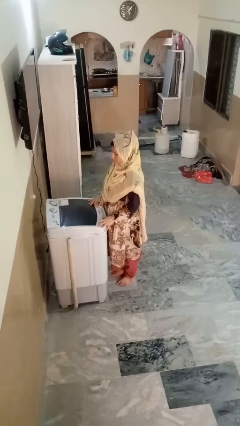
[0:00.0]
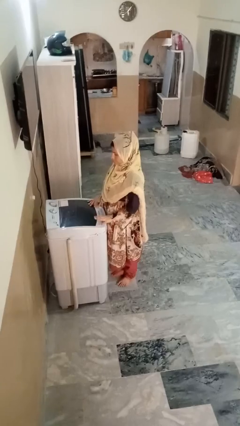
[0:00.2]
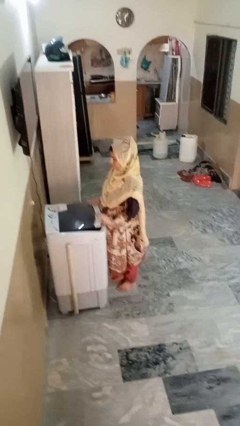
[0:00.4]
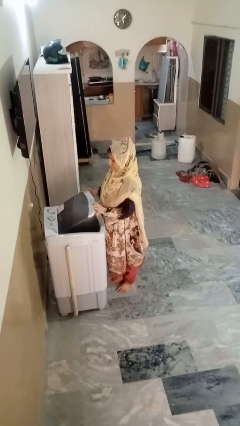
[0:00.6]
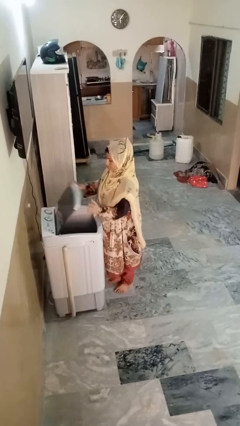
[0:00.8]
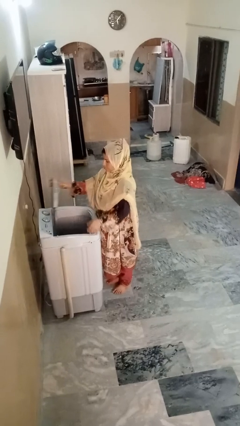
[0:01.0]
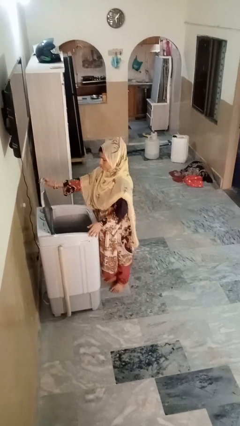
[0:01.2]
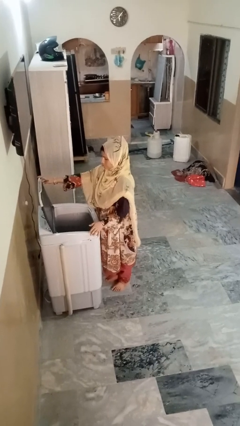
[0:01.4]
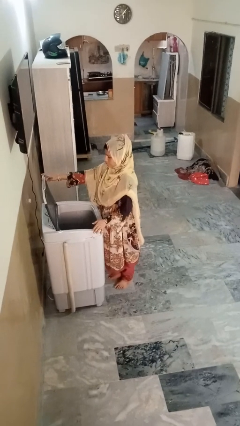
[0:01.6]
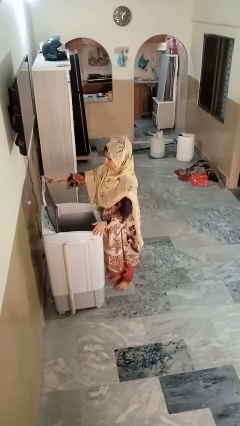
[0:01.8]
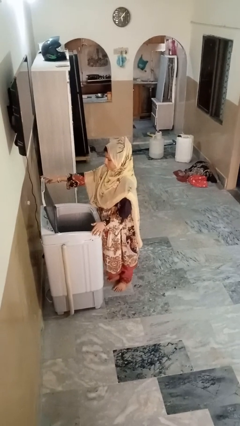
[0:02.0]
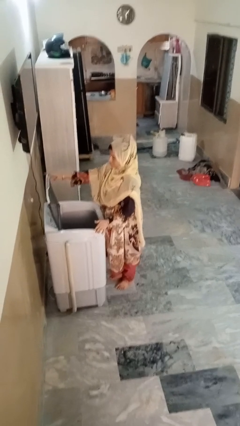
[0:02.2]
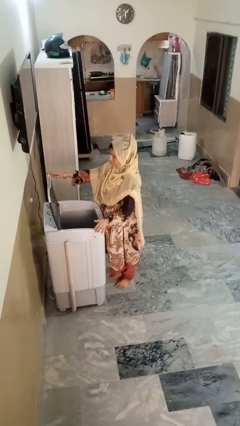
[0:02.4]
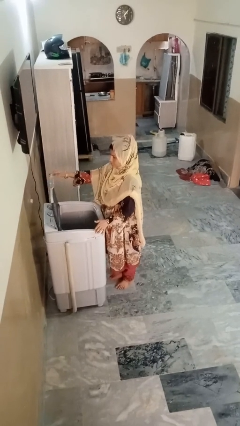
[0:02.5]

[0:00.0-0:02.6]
person opens clothes washer

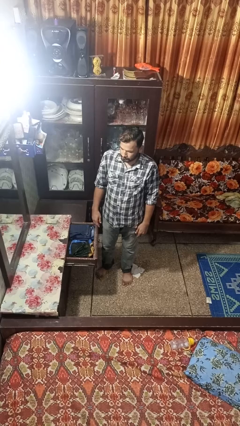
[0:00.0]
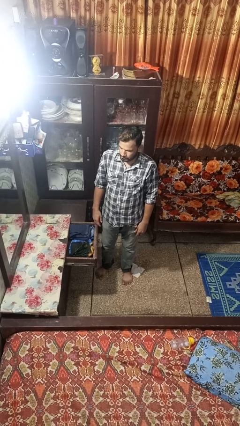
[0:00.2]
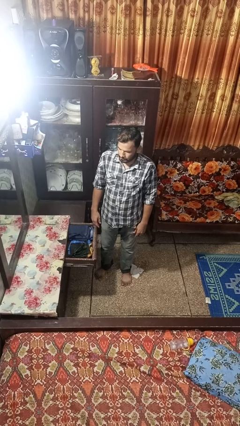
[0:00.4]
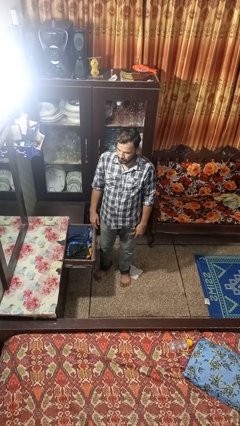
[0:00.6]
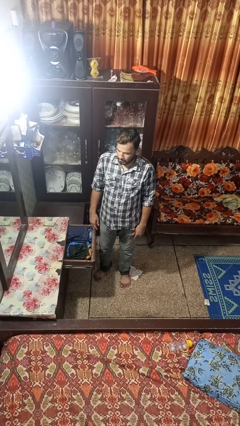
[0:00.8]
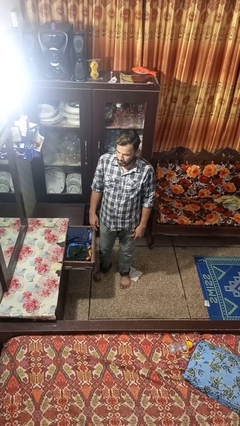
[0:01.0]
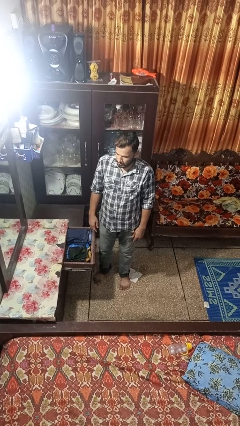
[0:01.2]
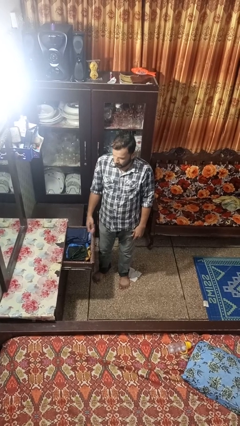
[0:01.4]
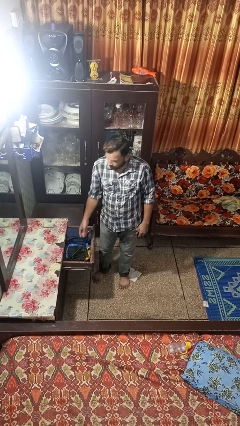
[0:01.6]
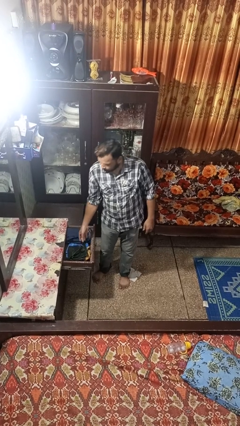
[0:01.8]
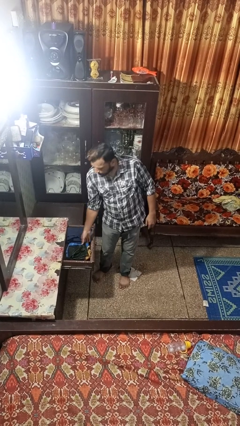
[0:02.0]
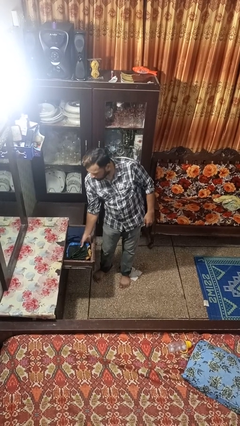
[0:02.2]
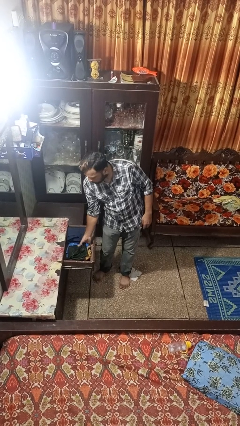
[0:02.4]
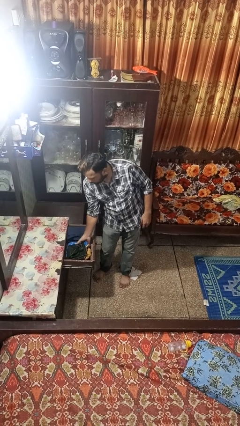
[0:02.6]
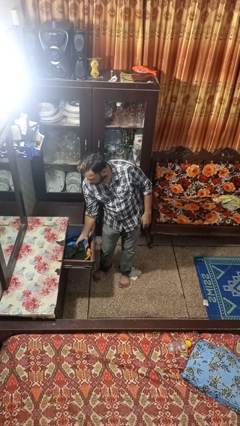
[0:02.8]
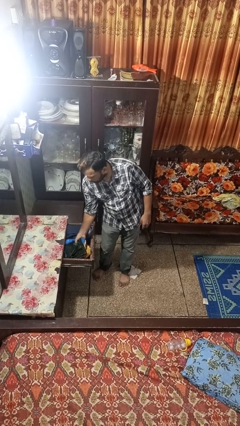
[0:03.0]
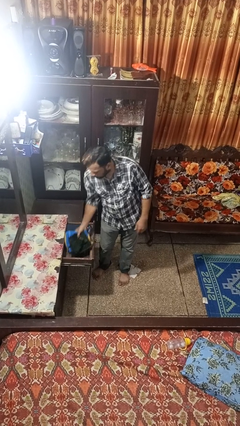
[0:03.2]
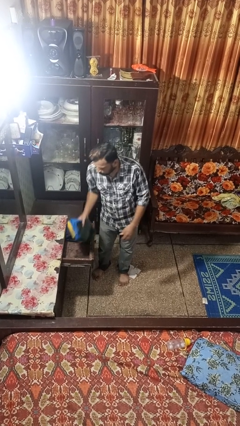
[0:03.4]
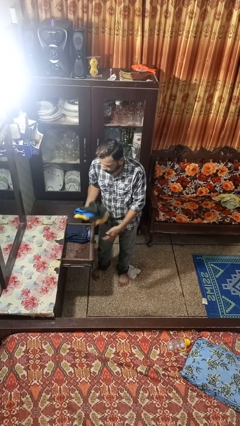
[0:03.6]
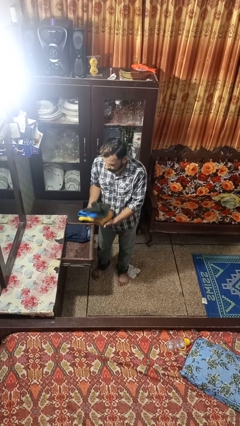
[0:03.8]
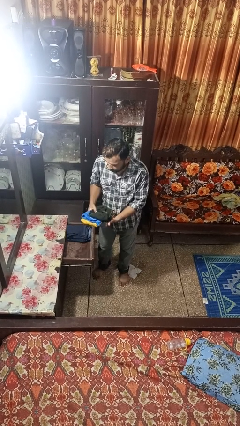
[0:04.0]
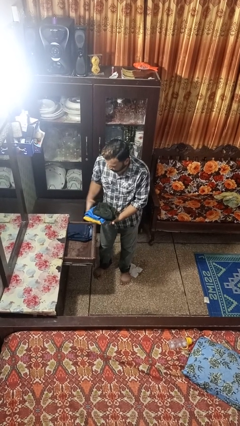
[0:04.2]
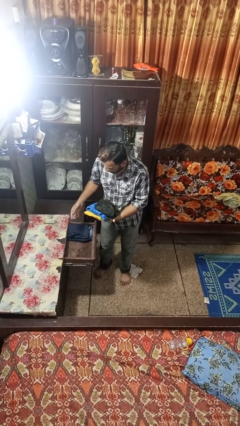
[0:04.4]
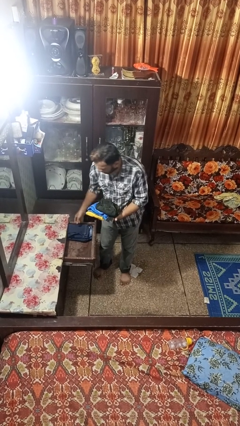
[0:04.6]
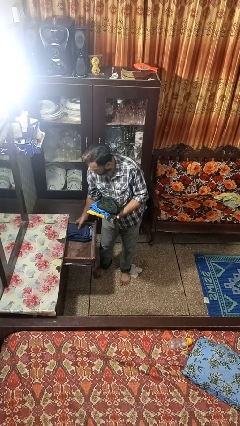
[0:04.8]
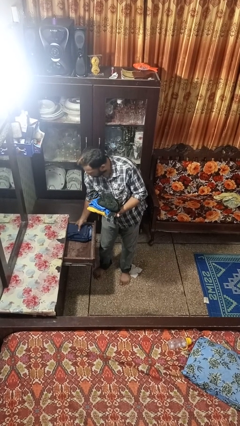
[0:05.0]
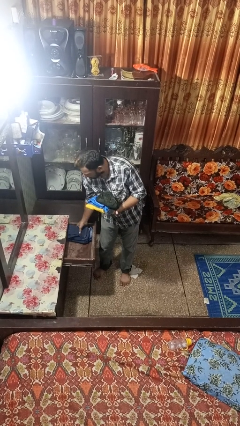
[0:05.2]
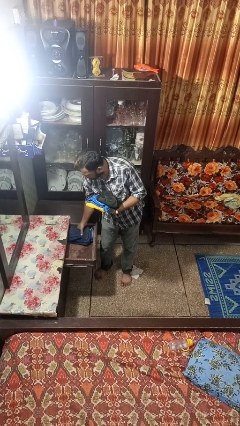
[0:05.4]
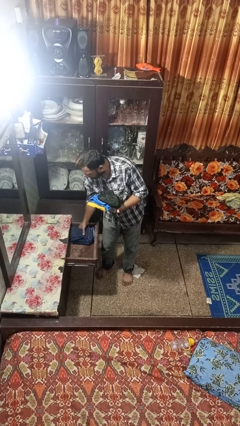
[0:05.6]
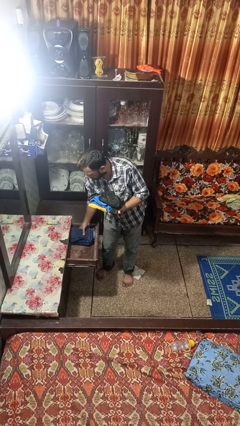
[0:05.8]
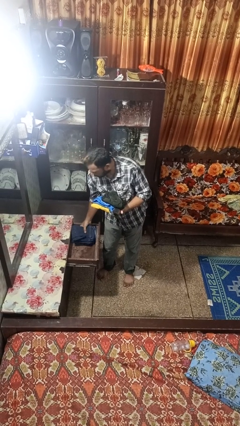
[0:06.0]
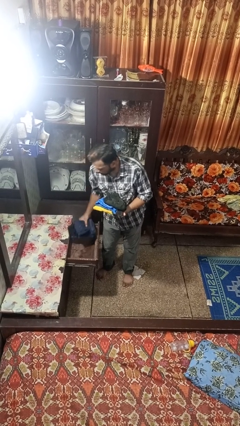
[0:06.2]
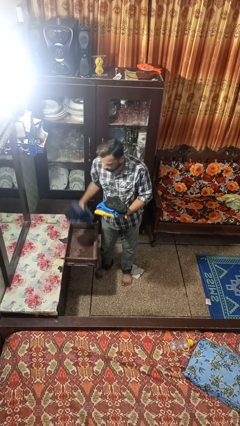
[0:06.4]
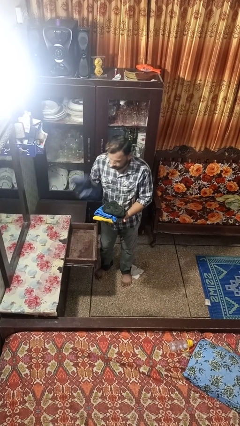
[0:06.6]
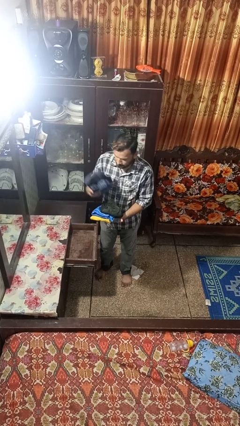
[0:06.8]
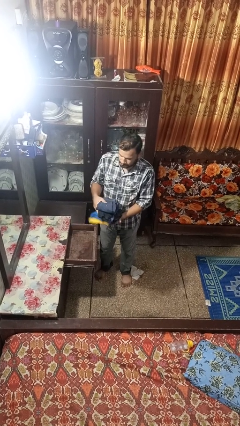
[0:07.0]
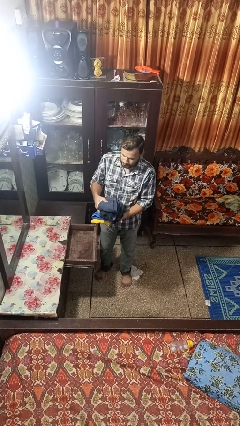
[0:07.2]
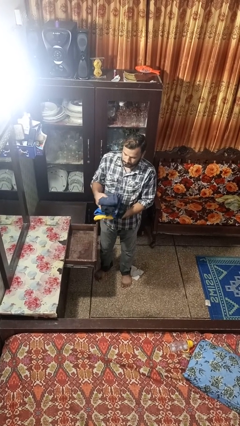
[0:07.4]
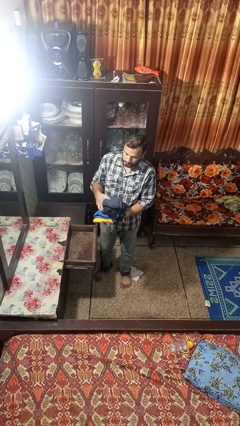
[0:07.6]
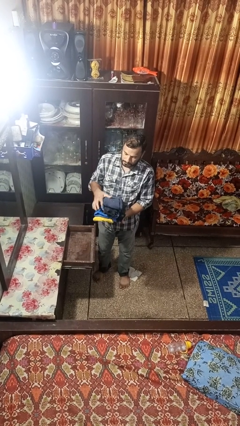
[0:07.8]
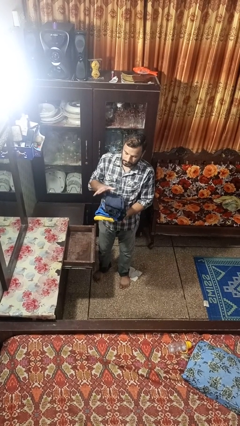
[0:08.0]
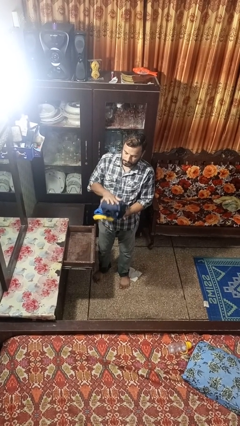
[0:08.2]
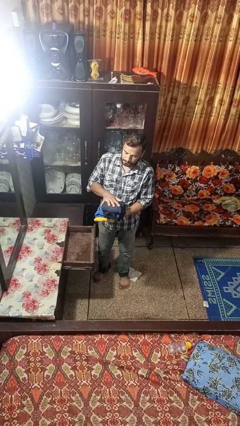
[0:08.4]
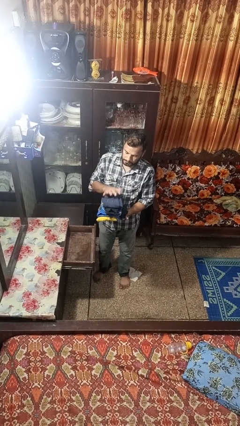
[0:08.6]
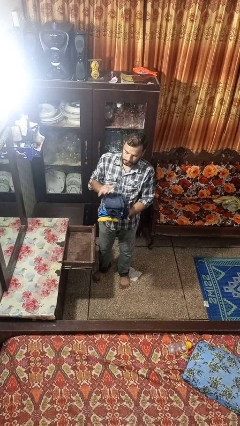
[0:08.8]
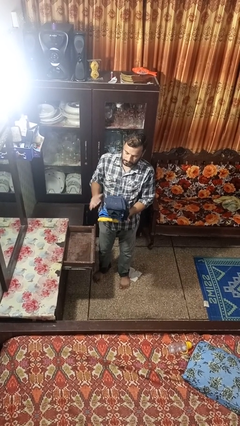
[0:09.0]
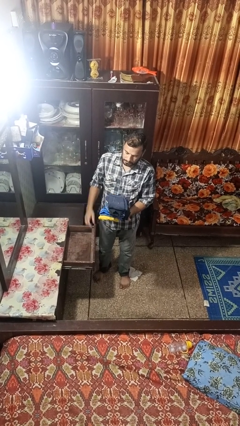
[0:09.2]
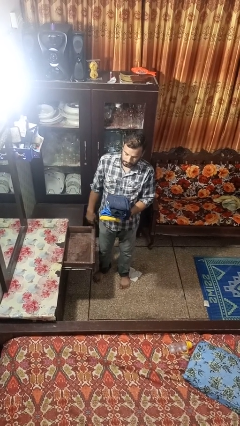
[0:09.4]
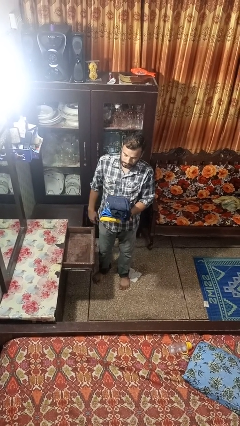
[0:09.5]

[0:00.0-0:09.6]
person takes clothes from dresser

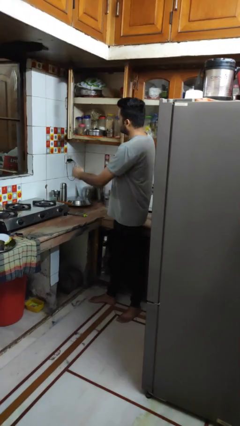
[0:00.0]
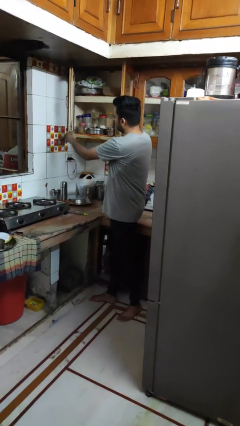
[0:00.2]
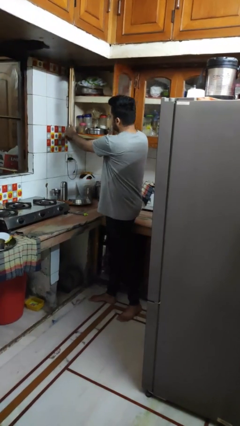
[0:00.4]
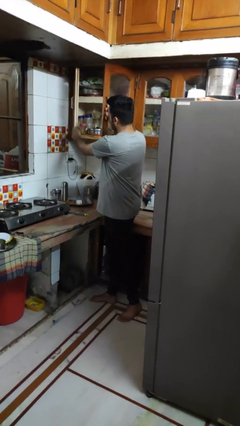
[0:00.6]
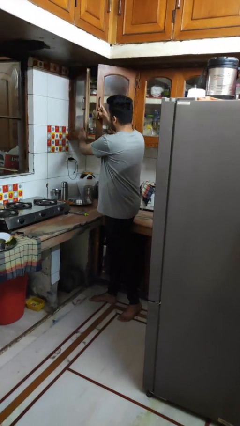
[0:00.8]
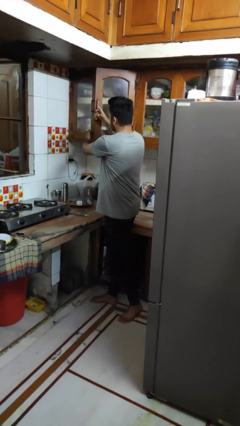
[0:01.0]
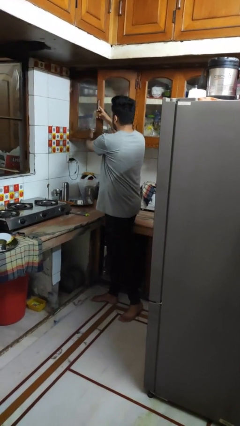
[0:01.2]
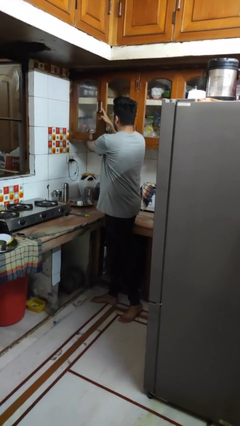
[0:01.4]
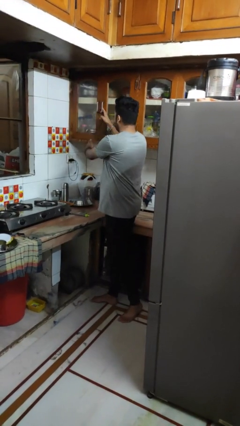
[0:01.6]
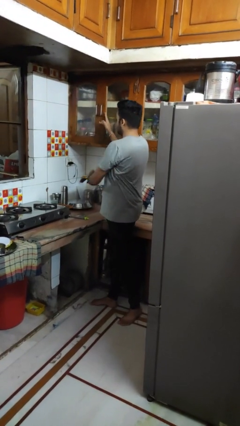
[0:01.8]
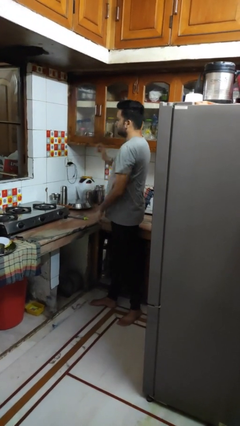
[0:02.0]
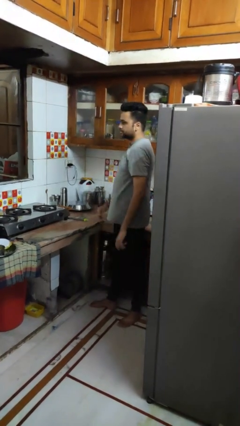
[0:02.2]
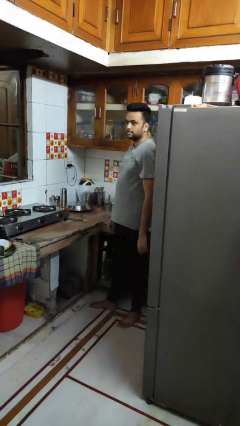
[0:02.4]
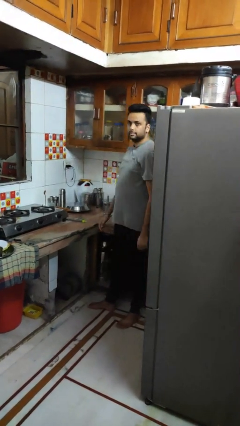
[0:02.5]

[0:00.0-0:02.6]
person closes cabinet

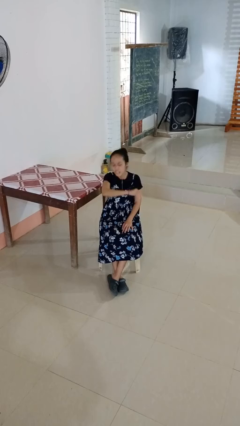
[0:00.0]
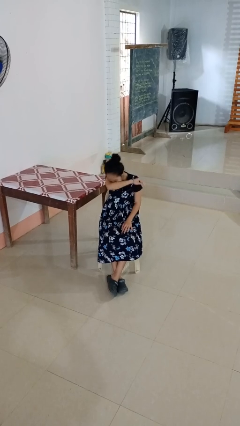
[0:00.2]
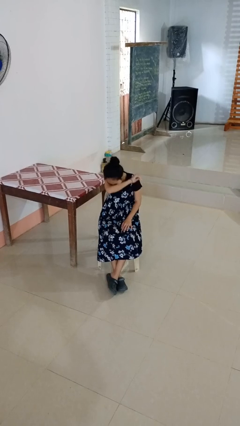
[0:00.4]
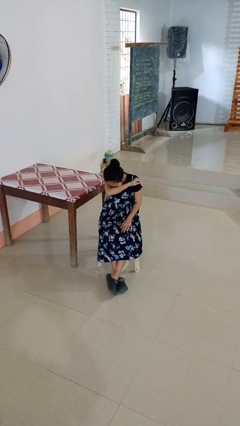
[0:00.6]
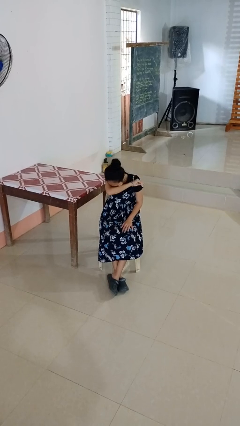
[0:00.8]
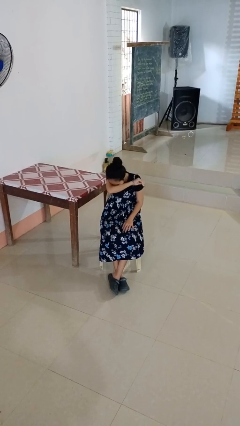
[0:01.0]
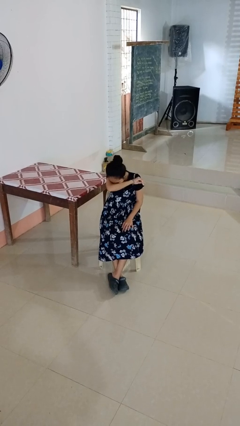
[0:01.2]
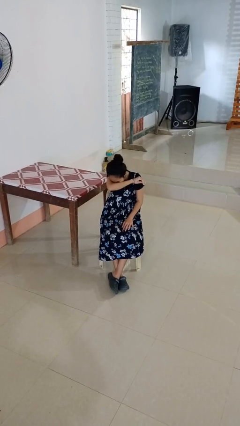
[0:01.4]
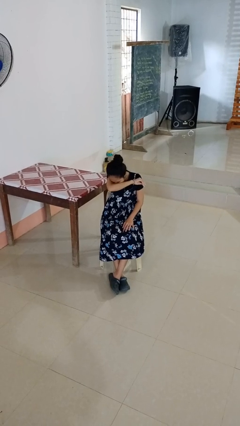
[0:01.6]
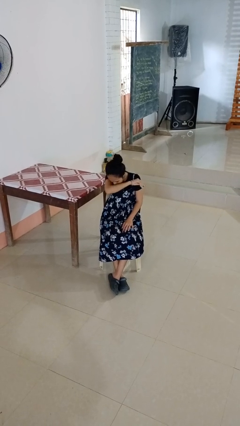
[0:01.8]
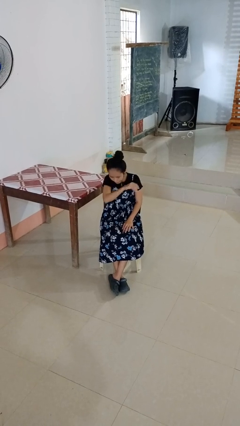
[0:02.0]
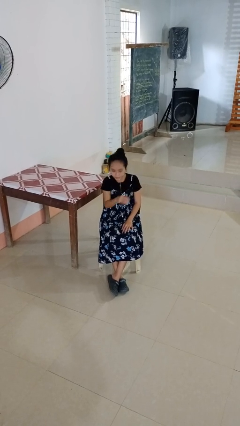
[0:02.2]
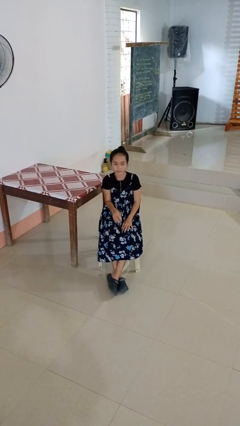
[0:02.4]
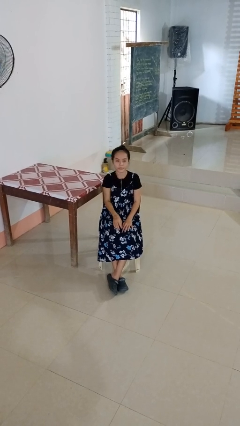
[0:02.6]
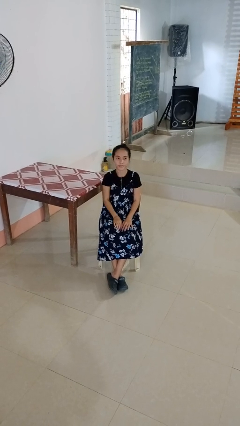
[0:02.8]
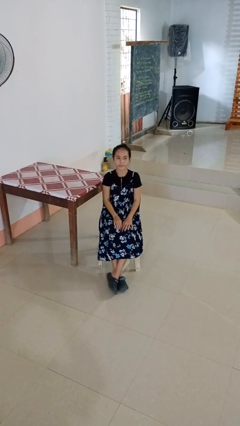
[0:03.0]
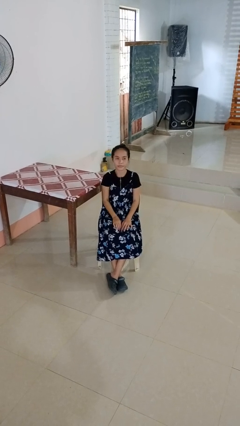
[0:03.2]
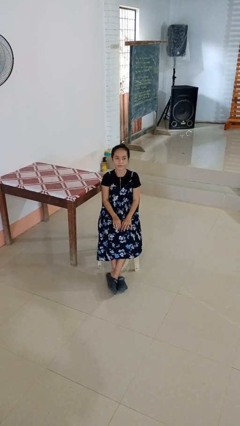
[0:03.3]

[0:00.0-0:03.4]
person sneezes into arm
